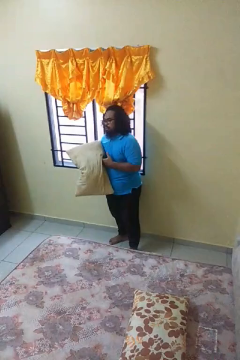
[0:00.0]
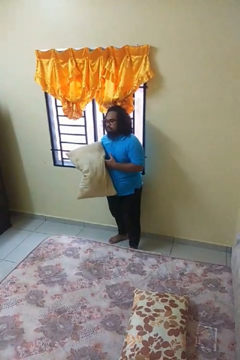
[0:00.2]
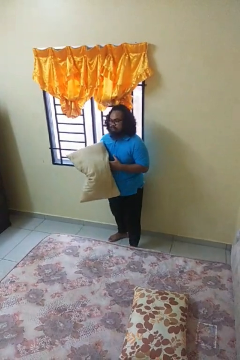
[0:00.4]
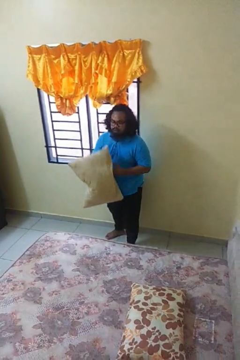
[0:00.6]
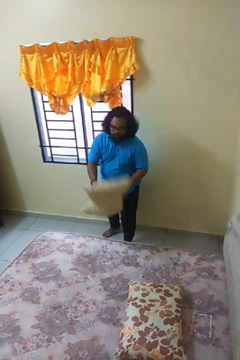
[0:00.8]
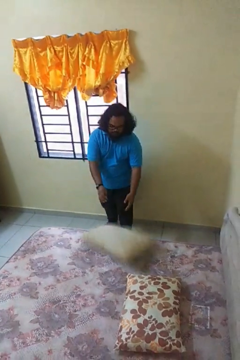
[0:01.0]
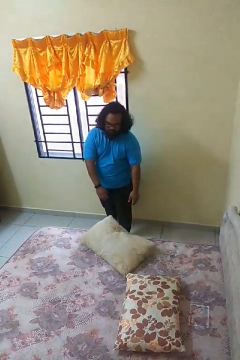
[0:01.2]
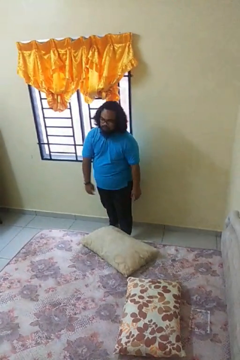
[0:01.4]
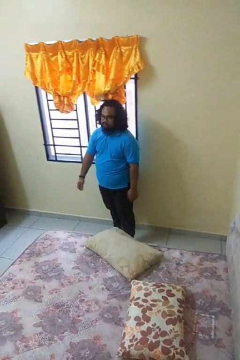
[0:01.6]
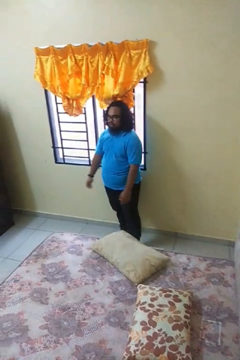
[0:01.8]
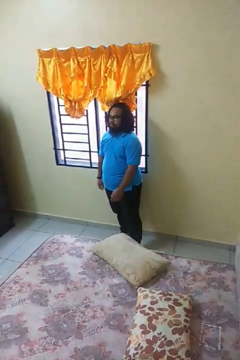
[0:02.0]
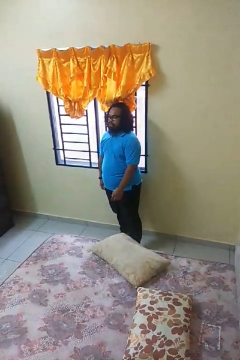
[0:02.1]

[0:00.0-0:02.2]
person puts down object on bed

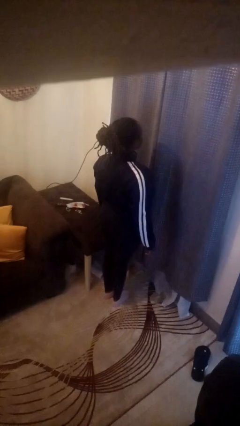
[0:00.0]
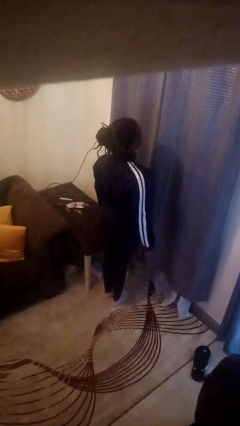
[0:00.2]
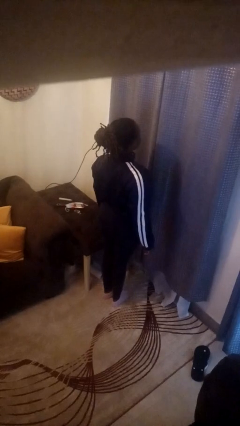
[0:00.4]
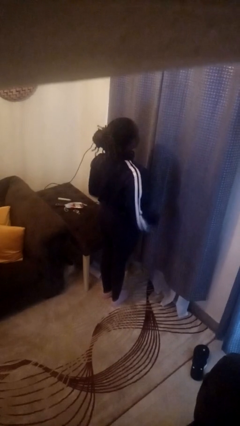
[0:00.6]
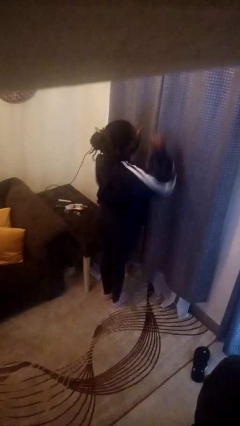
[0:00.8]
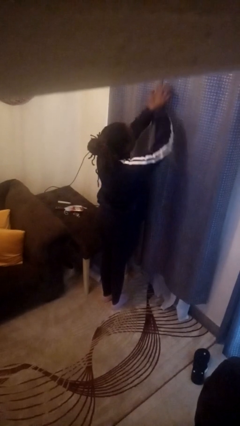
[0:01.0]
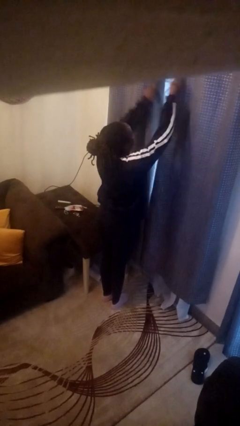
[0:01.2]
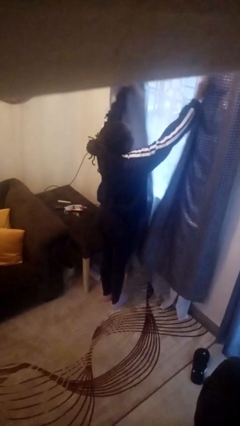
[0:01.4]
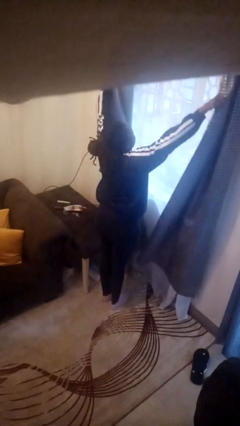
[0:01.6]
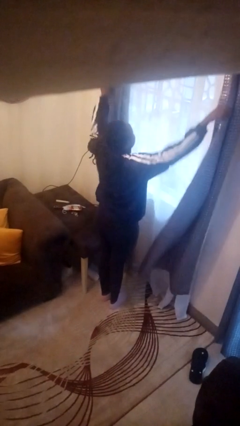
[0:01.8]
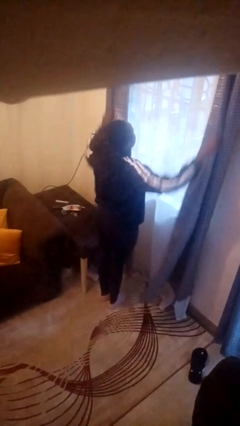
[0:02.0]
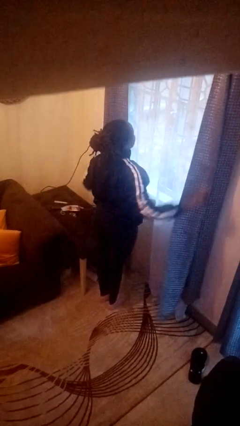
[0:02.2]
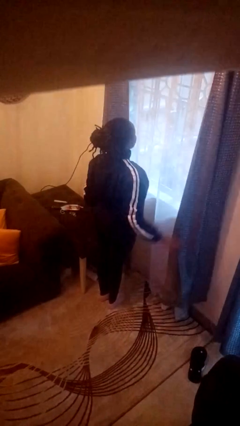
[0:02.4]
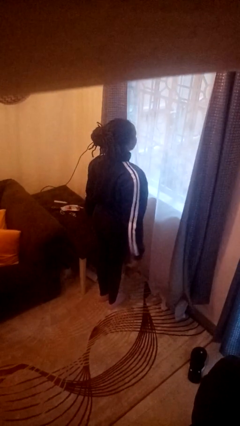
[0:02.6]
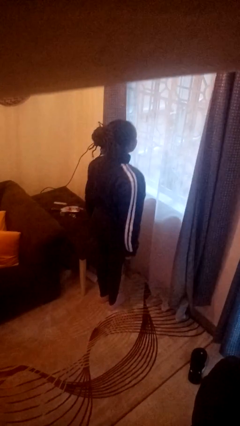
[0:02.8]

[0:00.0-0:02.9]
person opens curtains

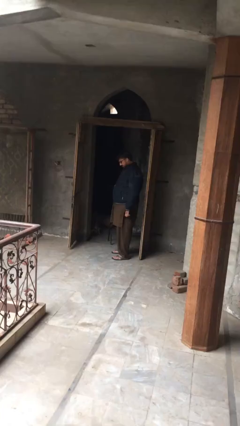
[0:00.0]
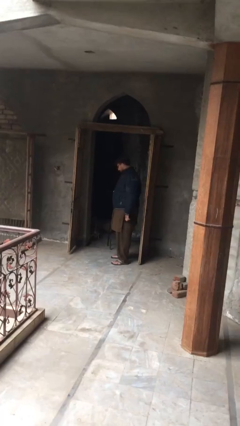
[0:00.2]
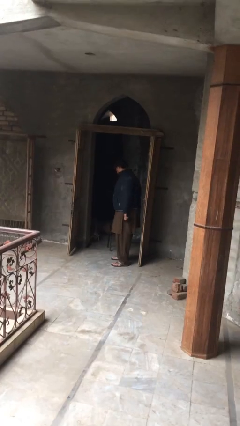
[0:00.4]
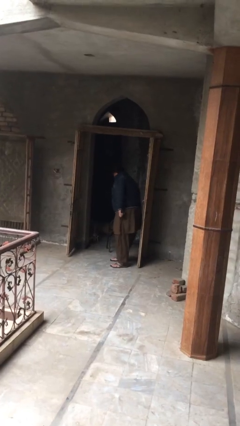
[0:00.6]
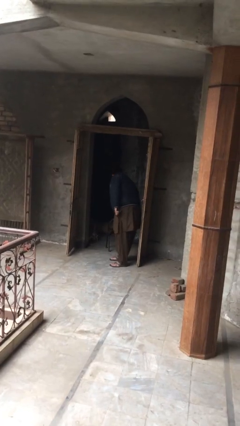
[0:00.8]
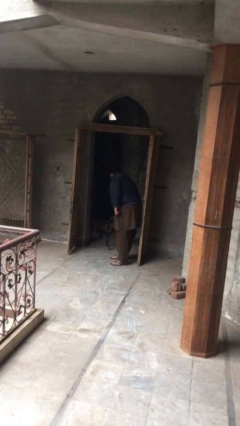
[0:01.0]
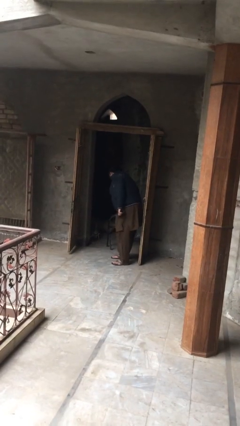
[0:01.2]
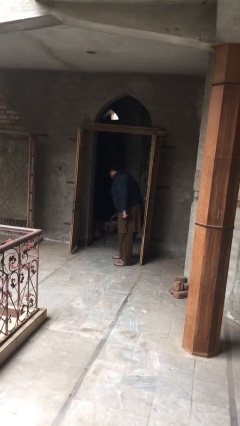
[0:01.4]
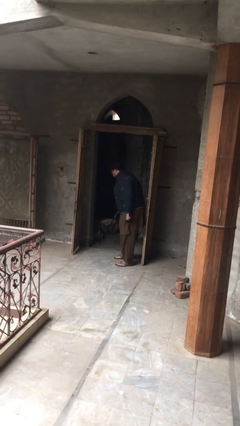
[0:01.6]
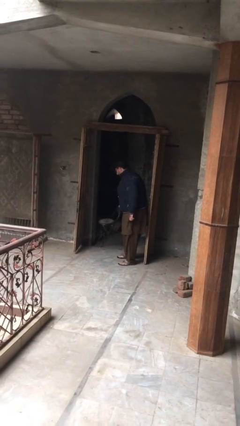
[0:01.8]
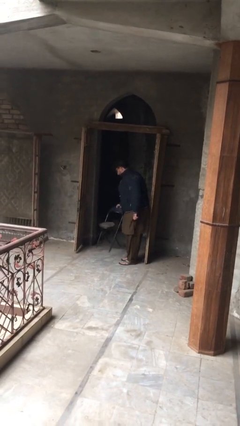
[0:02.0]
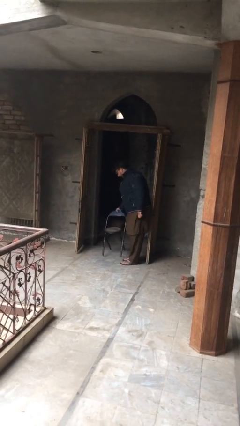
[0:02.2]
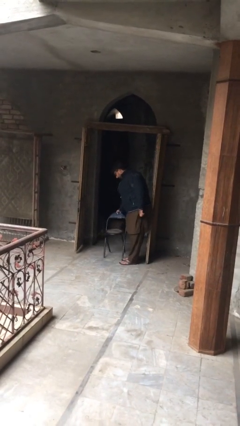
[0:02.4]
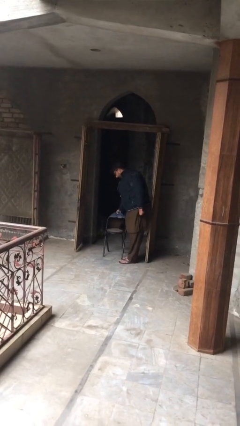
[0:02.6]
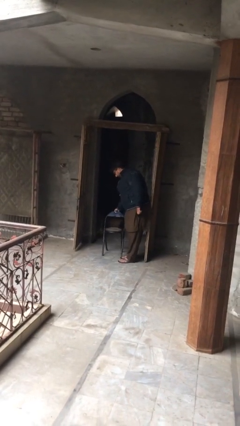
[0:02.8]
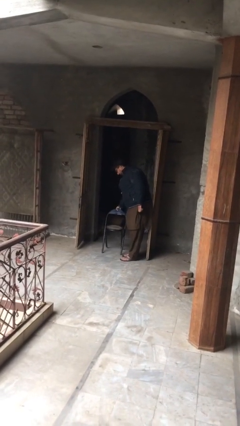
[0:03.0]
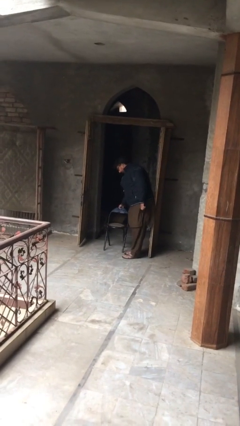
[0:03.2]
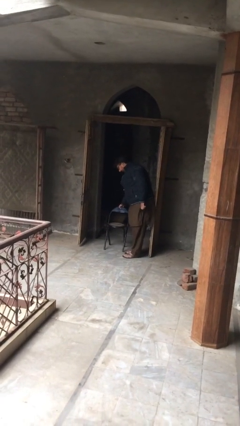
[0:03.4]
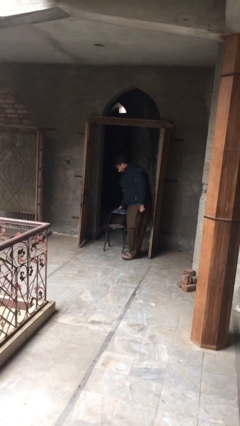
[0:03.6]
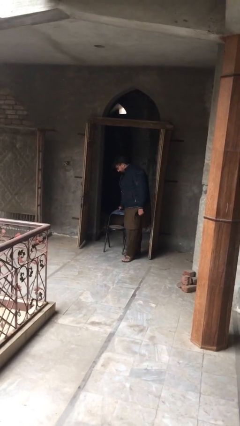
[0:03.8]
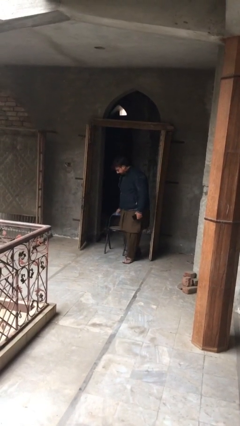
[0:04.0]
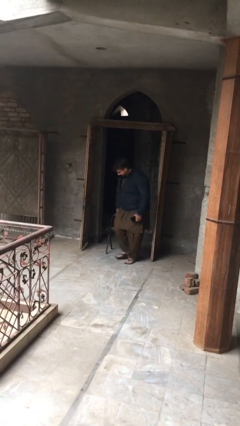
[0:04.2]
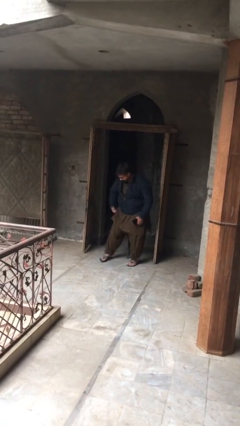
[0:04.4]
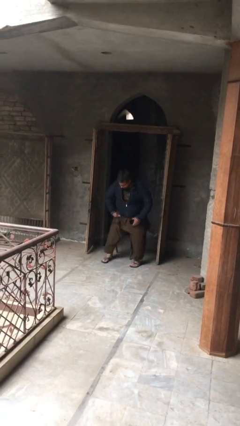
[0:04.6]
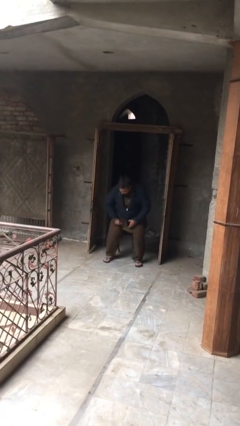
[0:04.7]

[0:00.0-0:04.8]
person stands up

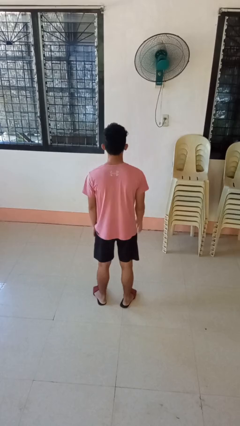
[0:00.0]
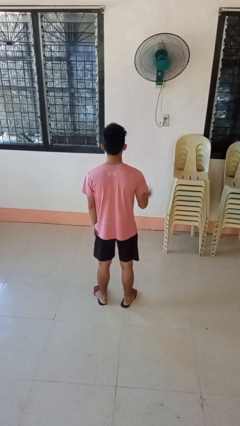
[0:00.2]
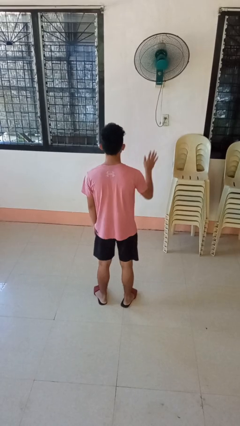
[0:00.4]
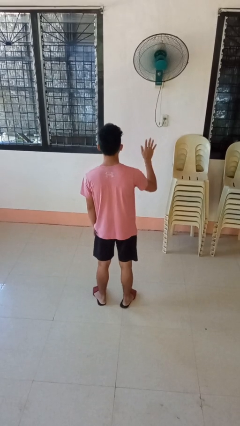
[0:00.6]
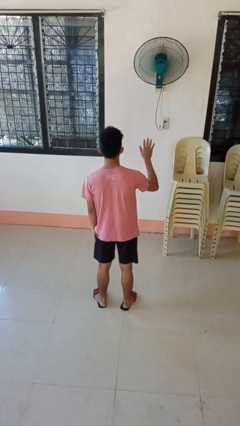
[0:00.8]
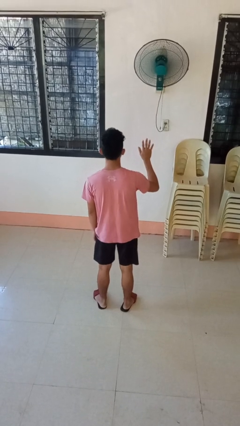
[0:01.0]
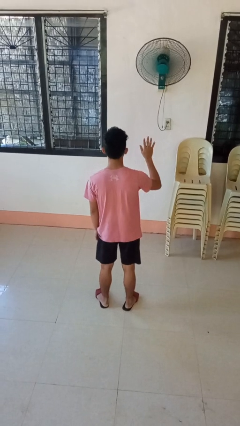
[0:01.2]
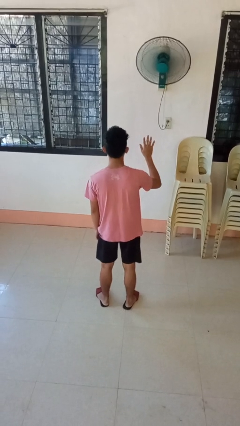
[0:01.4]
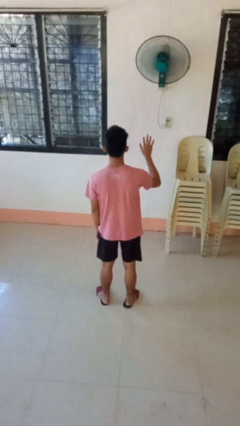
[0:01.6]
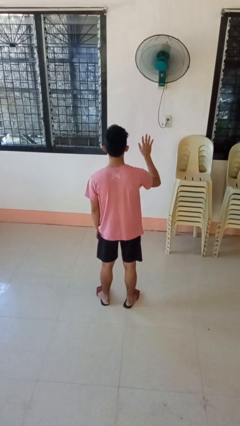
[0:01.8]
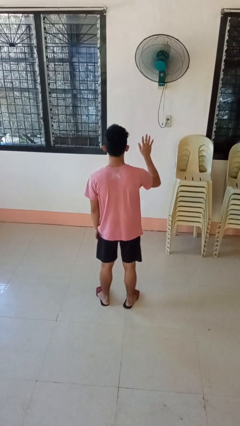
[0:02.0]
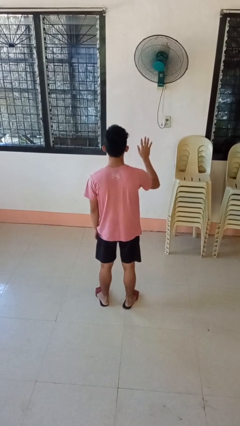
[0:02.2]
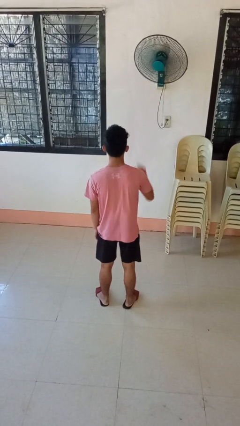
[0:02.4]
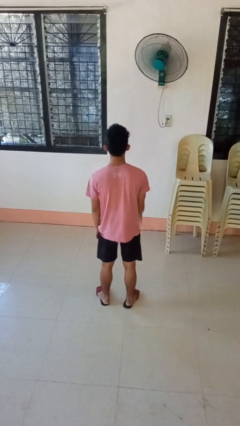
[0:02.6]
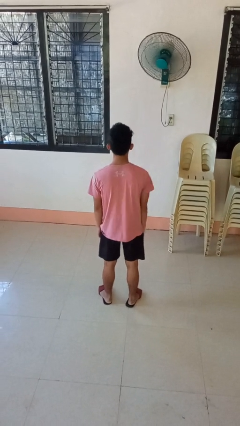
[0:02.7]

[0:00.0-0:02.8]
person gestures number five

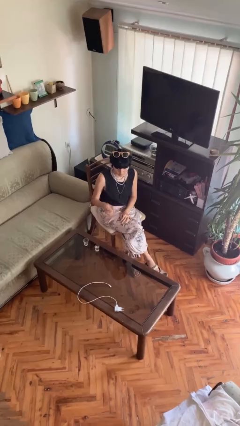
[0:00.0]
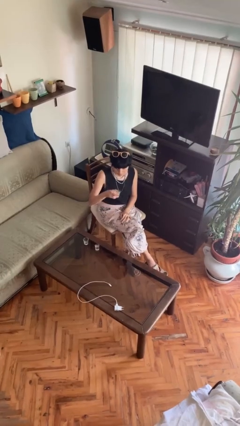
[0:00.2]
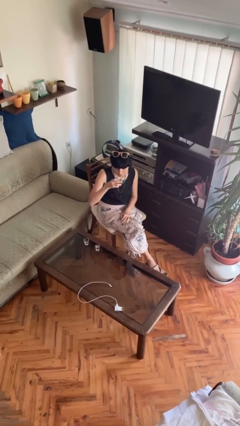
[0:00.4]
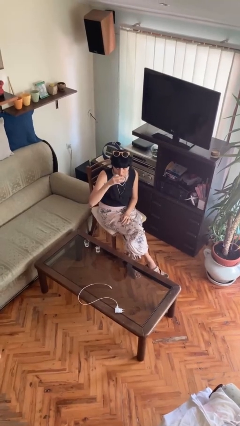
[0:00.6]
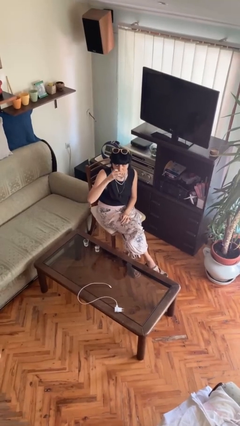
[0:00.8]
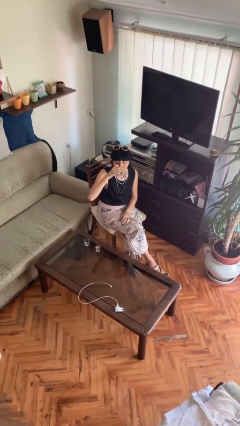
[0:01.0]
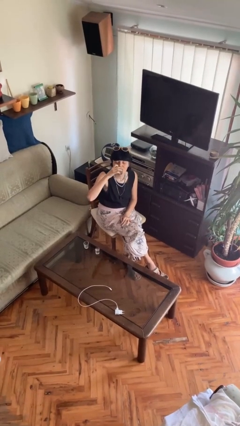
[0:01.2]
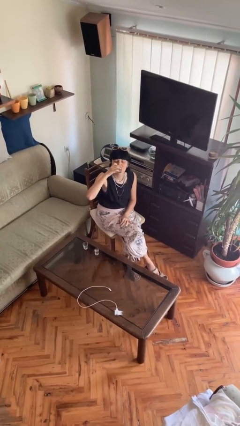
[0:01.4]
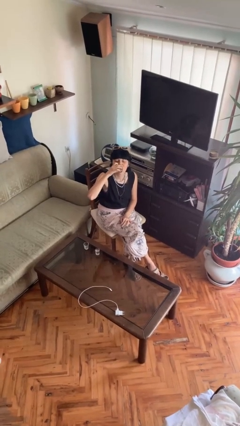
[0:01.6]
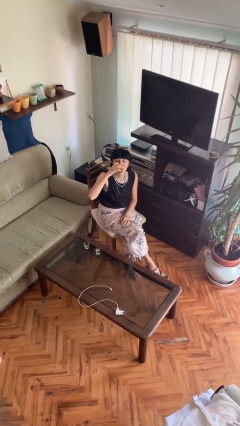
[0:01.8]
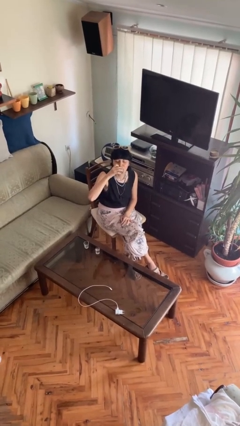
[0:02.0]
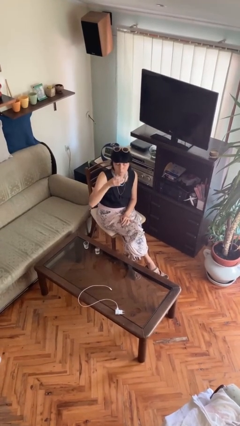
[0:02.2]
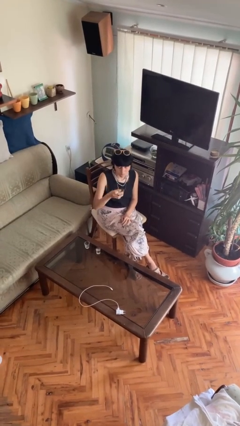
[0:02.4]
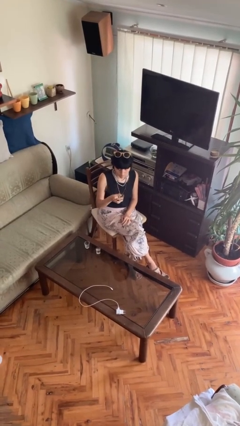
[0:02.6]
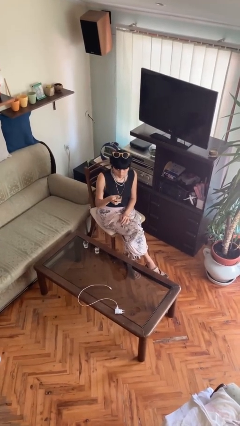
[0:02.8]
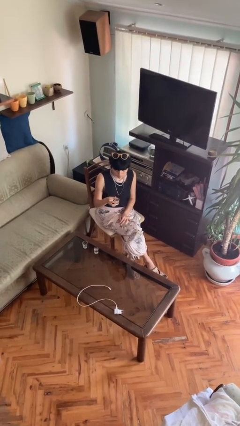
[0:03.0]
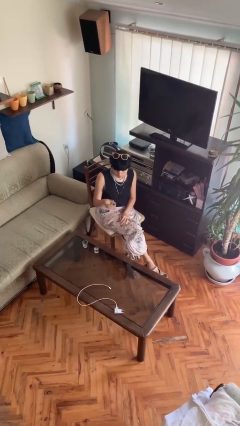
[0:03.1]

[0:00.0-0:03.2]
person drinks from shotglass

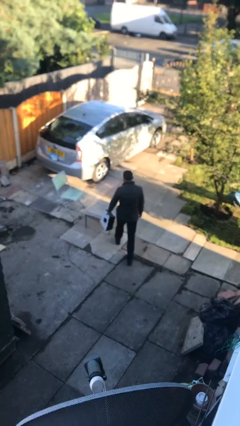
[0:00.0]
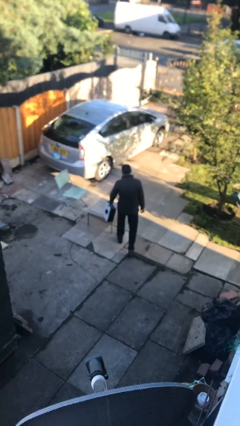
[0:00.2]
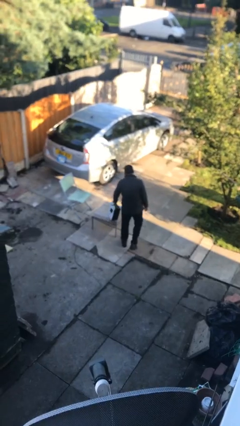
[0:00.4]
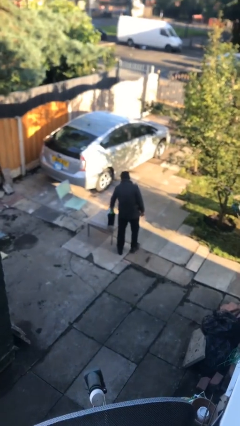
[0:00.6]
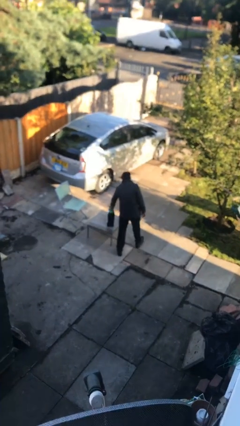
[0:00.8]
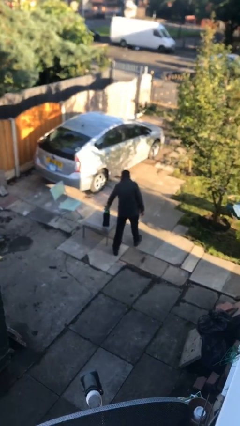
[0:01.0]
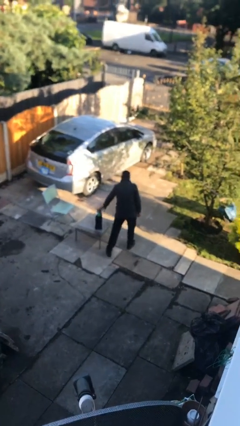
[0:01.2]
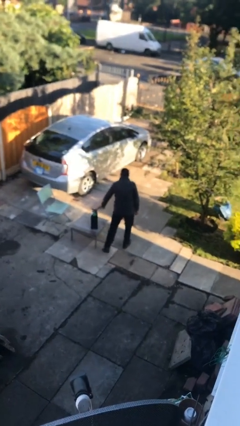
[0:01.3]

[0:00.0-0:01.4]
person puts down object on table

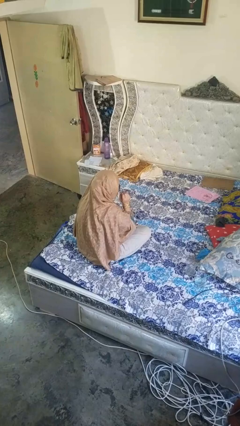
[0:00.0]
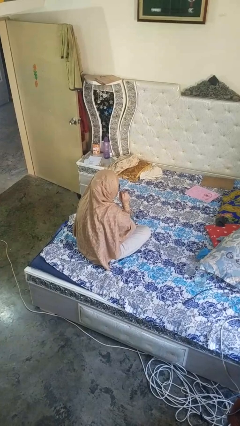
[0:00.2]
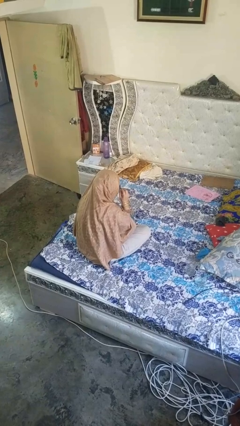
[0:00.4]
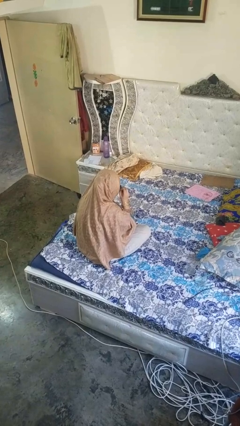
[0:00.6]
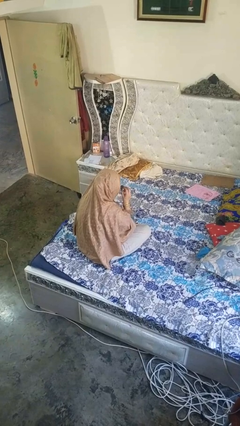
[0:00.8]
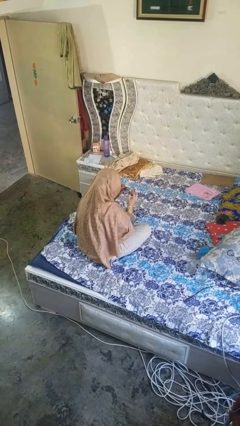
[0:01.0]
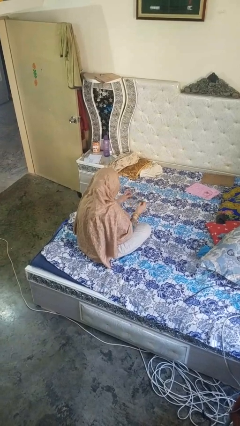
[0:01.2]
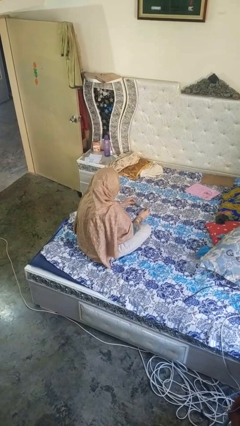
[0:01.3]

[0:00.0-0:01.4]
person takes off glasses
